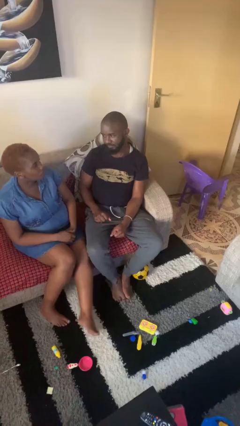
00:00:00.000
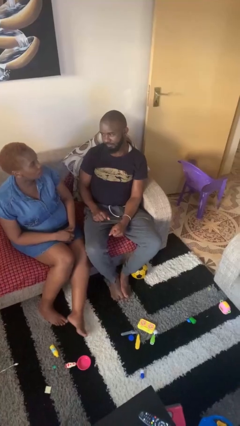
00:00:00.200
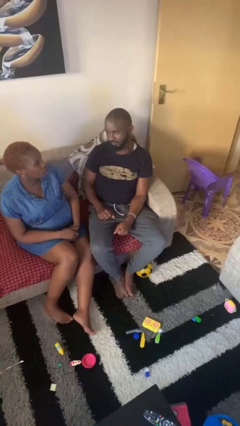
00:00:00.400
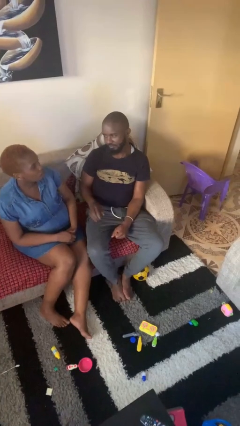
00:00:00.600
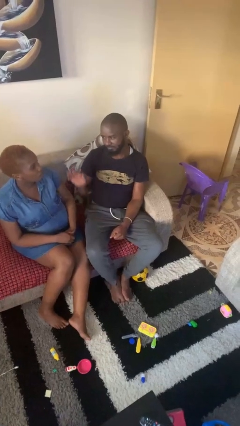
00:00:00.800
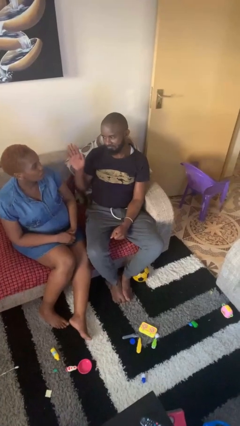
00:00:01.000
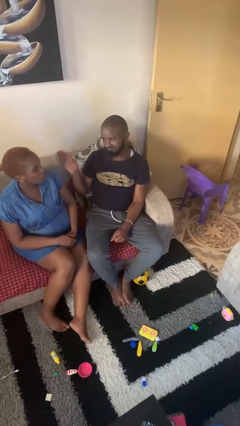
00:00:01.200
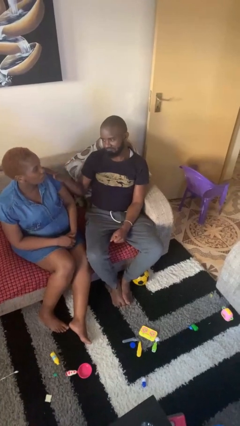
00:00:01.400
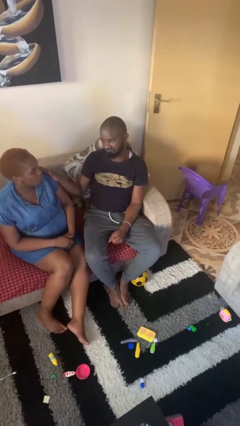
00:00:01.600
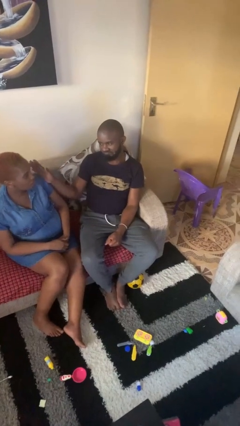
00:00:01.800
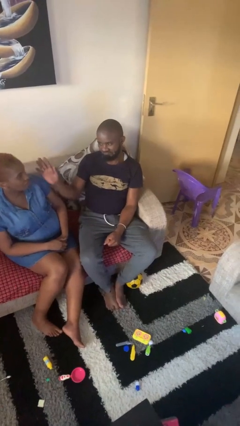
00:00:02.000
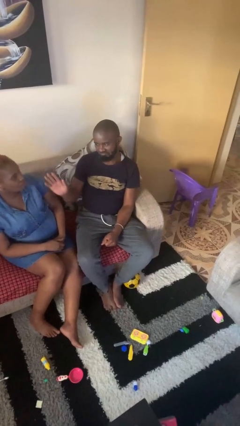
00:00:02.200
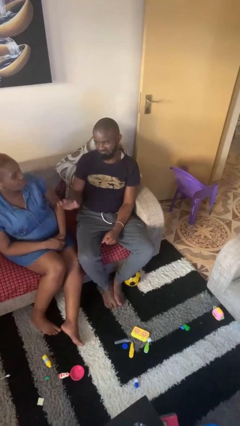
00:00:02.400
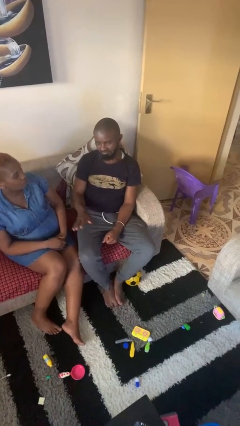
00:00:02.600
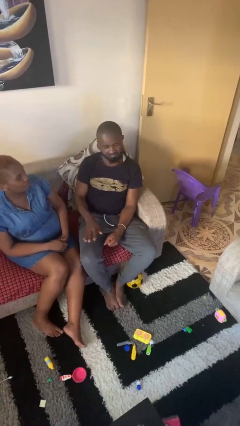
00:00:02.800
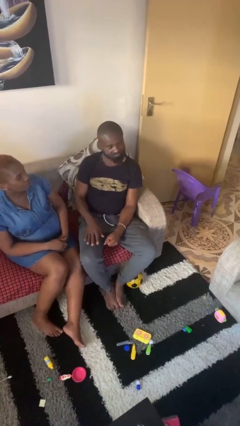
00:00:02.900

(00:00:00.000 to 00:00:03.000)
person shoves person

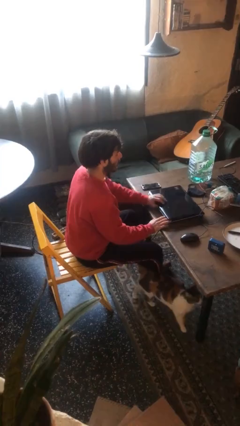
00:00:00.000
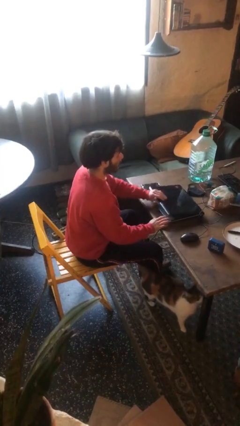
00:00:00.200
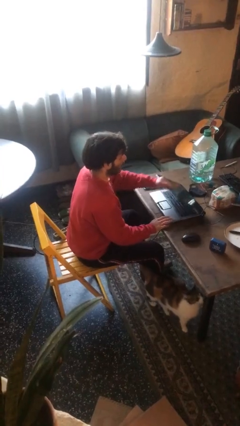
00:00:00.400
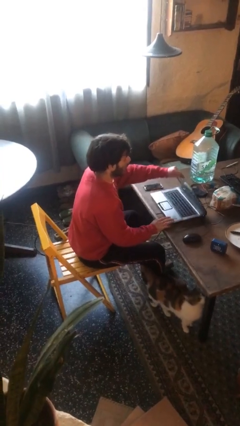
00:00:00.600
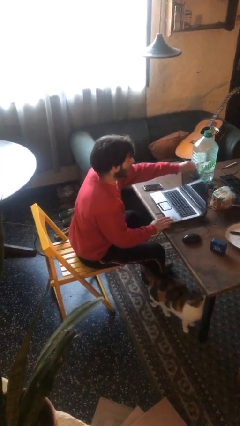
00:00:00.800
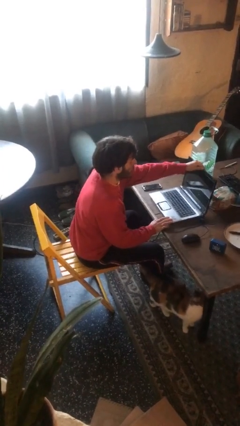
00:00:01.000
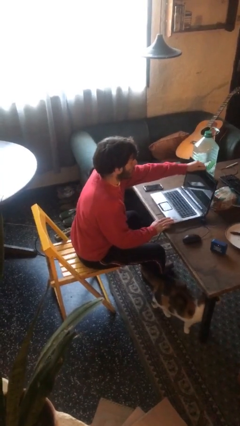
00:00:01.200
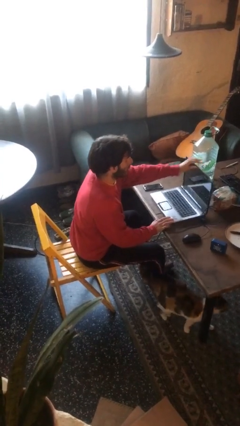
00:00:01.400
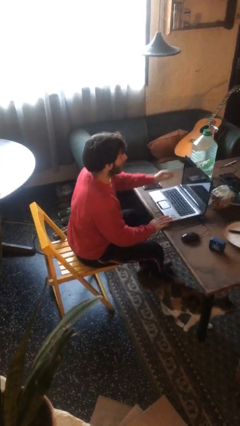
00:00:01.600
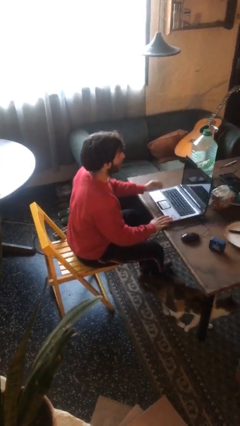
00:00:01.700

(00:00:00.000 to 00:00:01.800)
person opens laptop

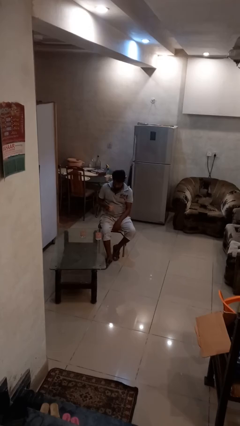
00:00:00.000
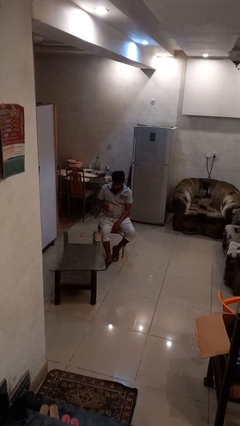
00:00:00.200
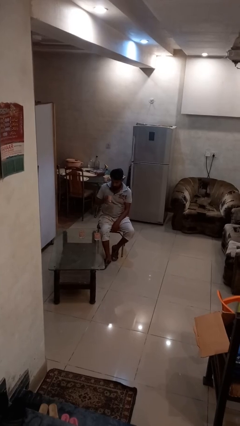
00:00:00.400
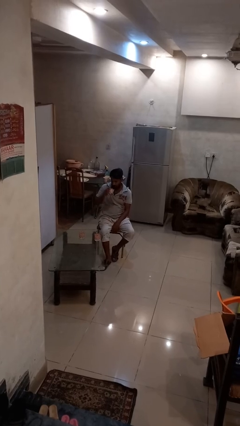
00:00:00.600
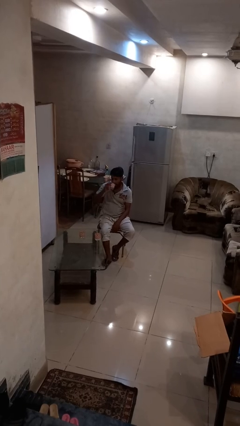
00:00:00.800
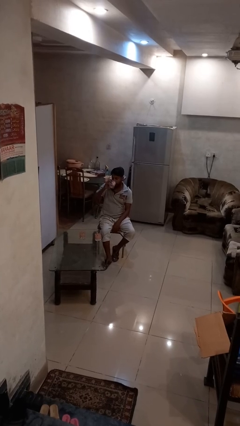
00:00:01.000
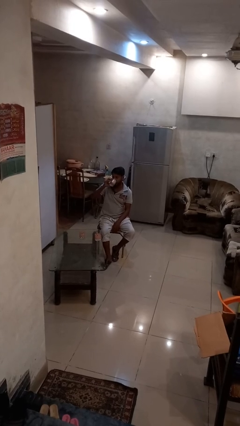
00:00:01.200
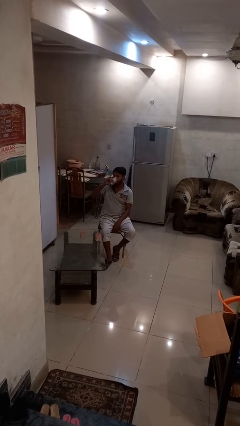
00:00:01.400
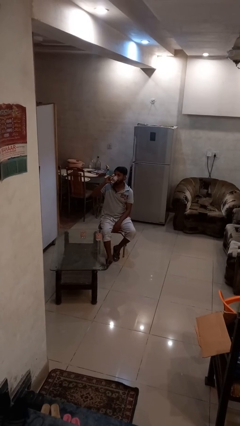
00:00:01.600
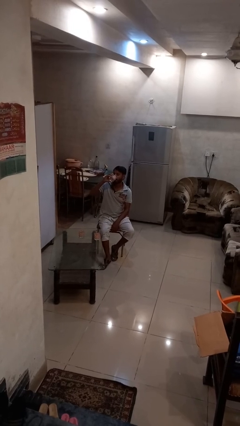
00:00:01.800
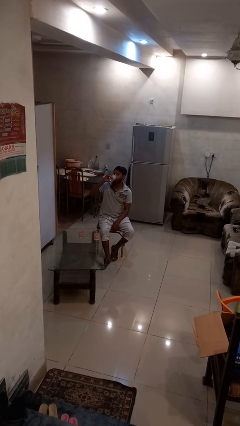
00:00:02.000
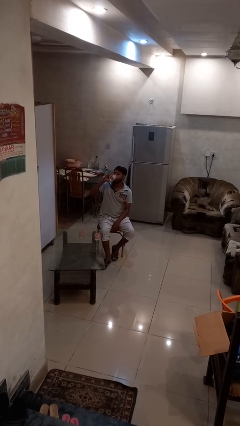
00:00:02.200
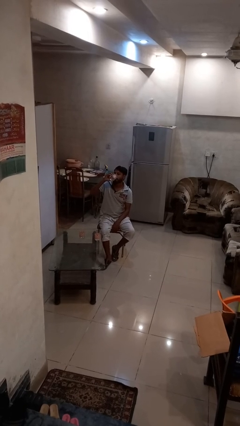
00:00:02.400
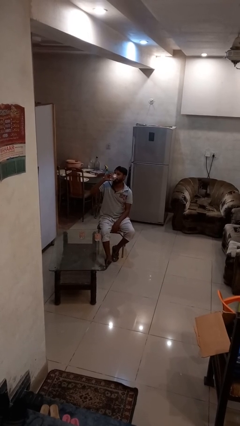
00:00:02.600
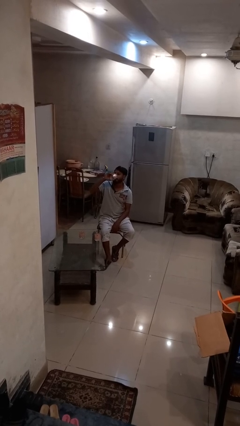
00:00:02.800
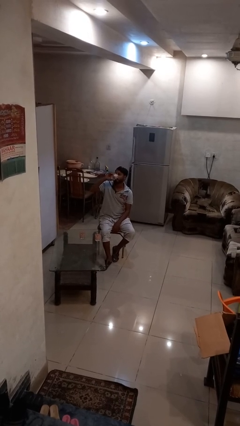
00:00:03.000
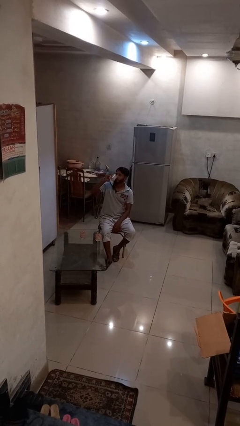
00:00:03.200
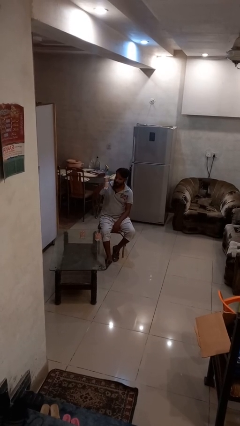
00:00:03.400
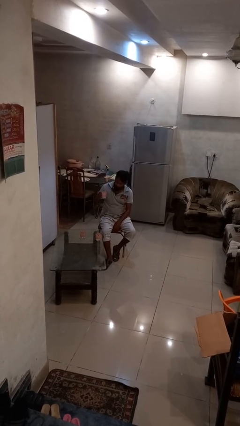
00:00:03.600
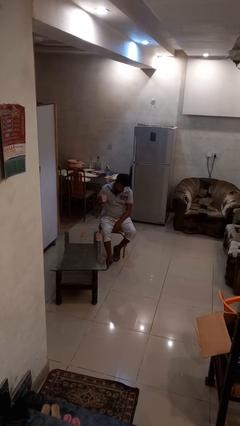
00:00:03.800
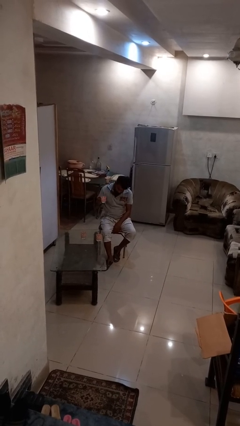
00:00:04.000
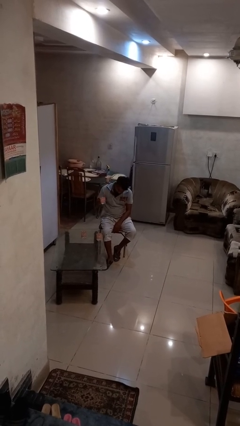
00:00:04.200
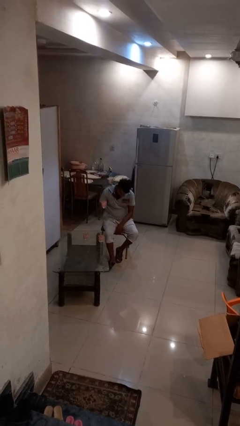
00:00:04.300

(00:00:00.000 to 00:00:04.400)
person drinks from shotglass

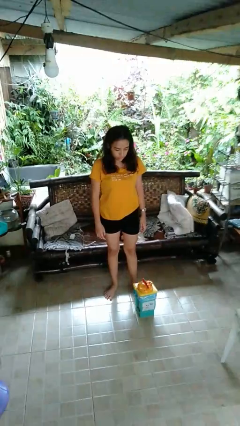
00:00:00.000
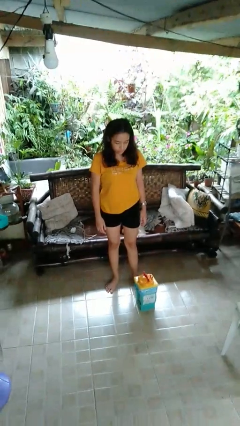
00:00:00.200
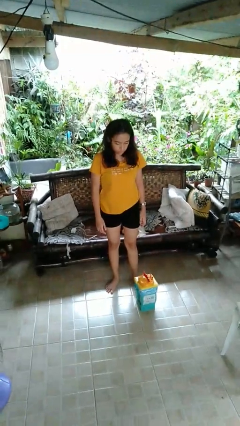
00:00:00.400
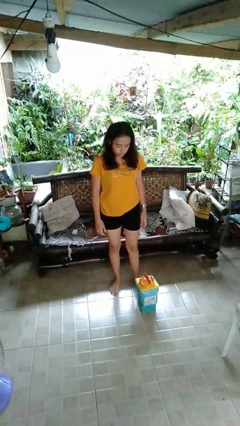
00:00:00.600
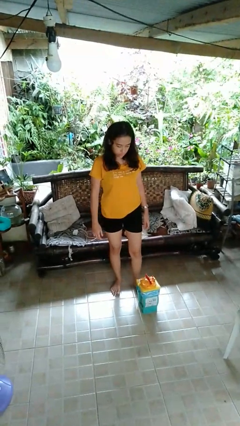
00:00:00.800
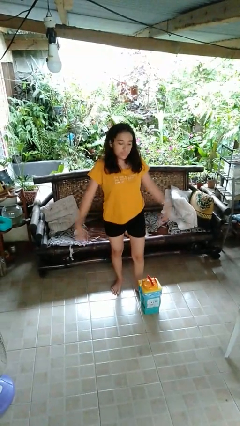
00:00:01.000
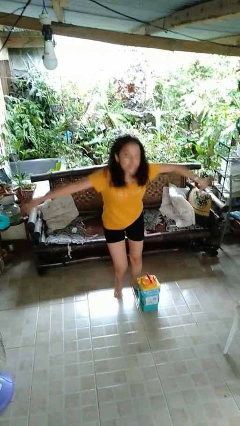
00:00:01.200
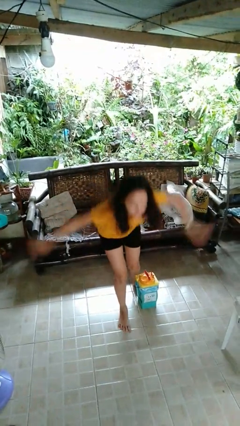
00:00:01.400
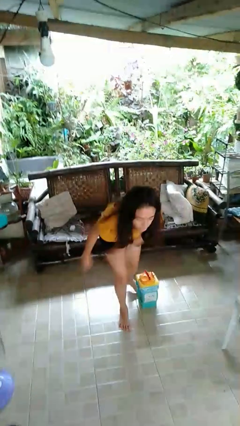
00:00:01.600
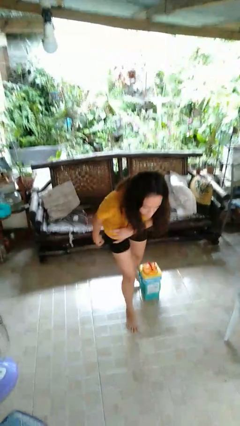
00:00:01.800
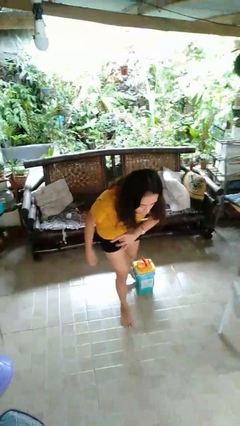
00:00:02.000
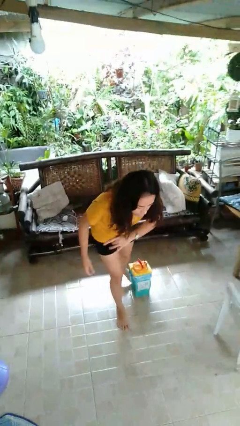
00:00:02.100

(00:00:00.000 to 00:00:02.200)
person trips on object on floor

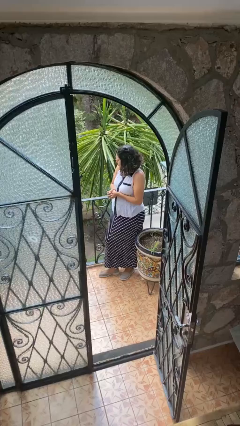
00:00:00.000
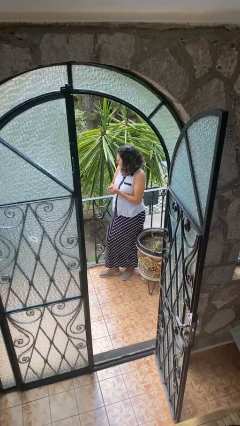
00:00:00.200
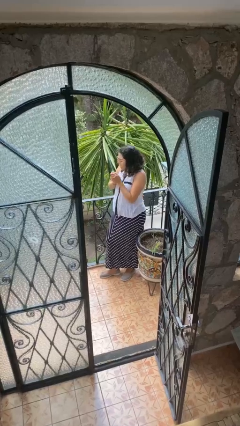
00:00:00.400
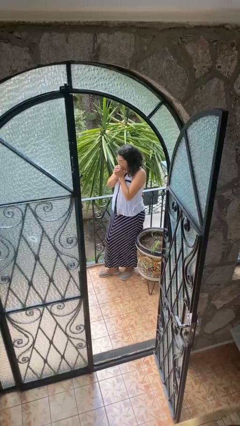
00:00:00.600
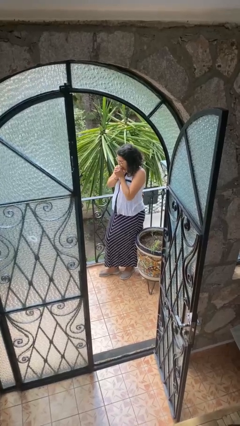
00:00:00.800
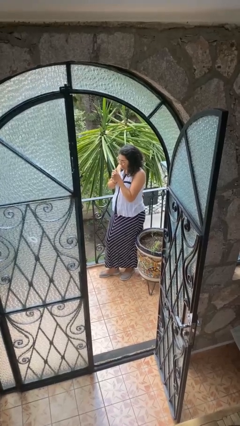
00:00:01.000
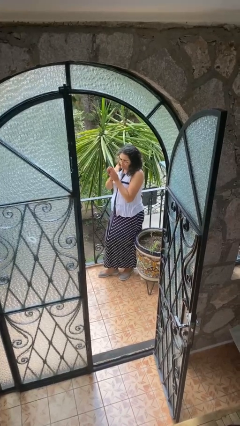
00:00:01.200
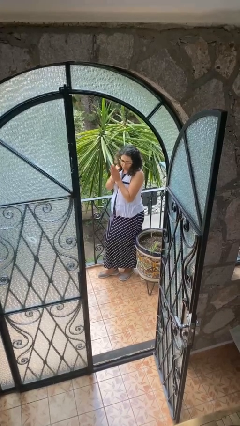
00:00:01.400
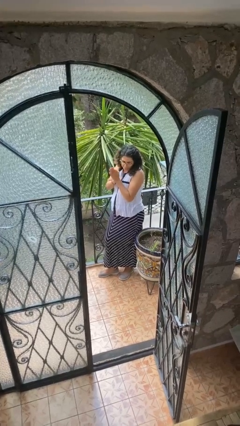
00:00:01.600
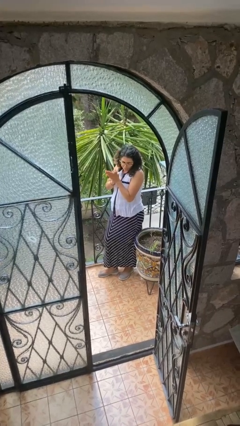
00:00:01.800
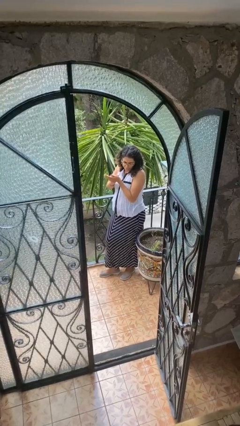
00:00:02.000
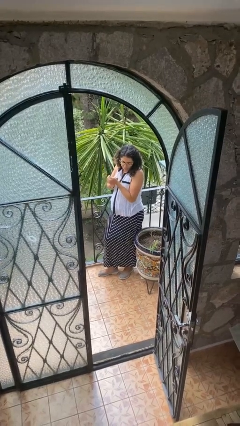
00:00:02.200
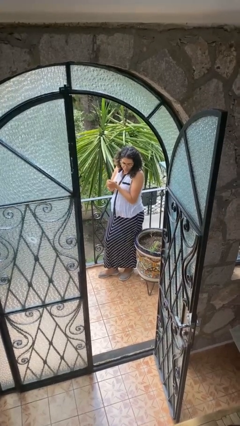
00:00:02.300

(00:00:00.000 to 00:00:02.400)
person blows into hands

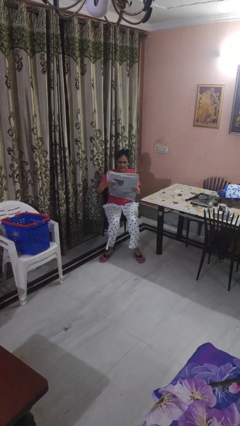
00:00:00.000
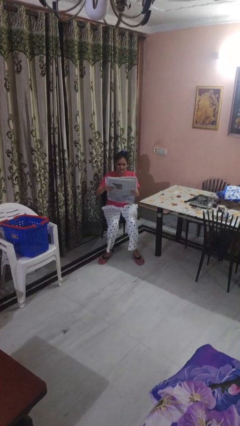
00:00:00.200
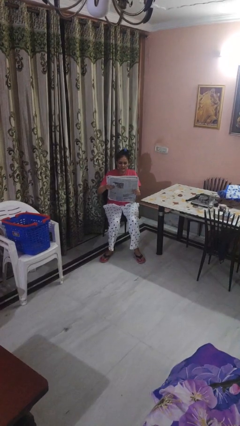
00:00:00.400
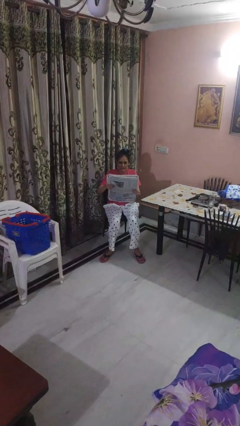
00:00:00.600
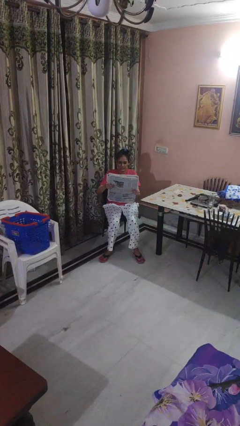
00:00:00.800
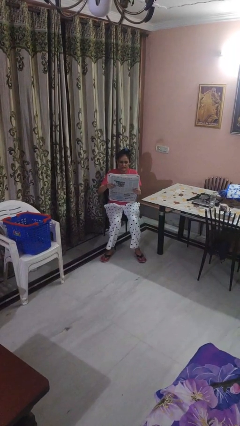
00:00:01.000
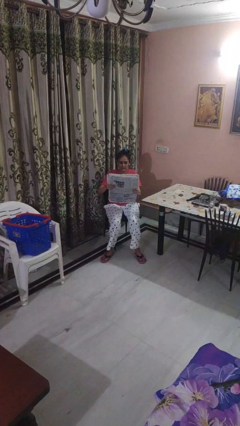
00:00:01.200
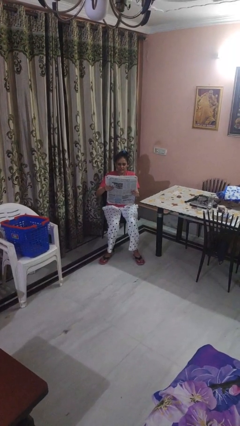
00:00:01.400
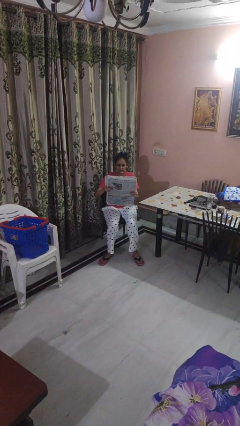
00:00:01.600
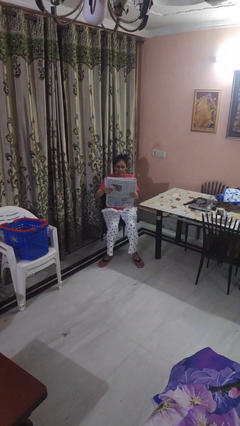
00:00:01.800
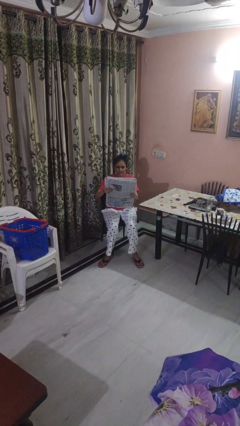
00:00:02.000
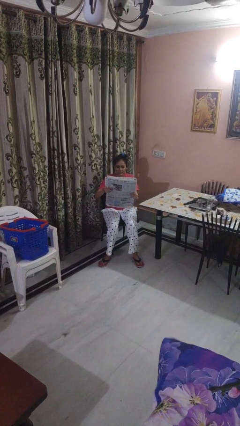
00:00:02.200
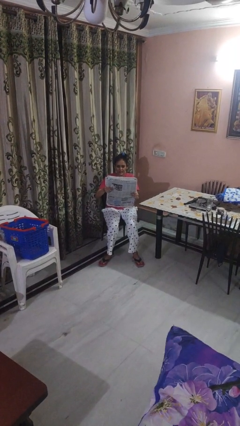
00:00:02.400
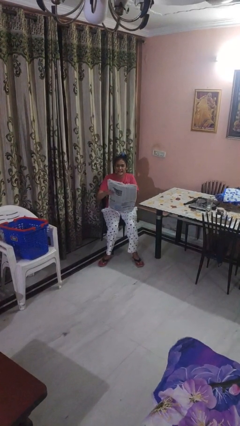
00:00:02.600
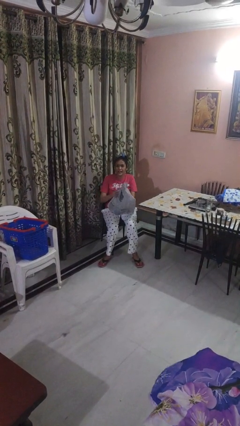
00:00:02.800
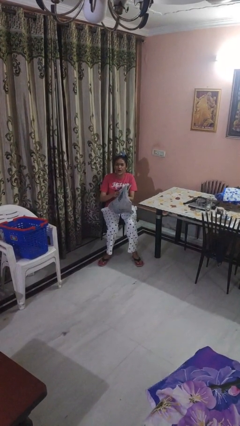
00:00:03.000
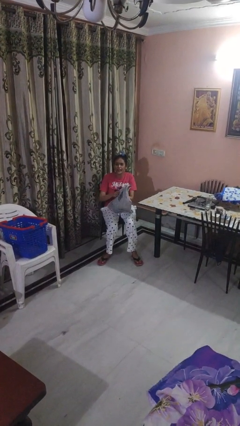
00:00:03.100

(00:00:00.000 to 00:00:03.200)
person reads newspaper
